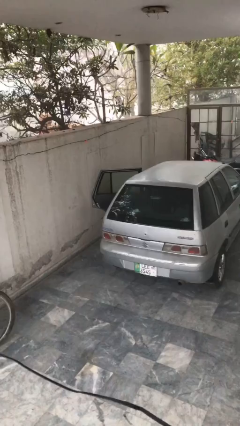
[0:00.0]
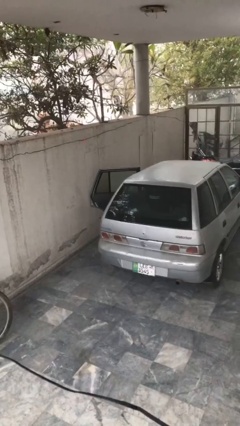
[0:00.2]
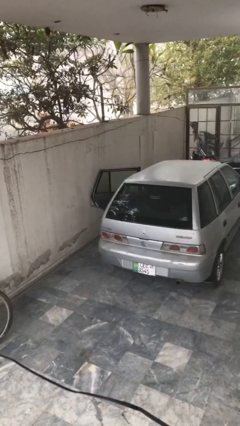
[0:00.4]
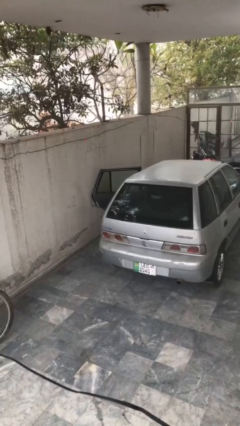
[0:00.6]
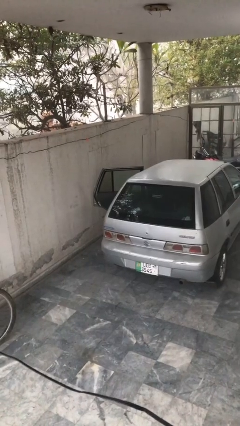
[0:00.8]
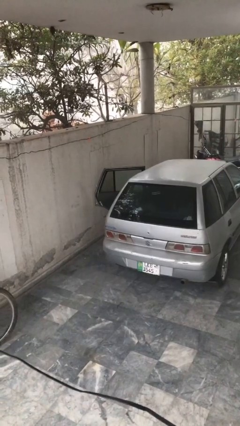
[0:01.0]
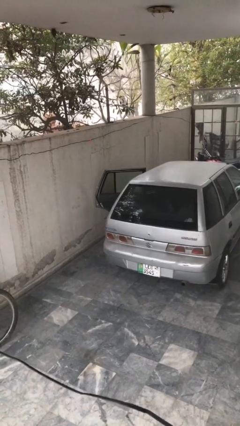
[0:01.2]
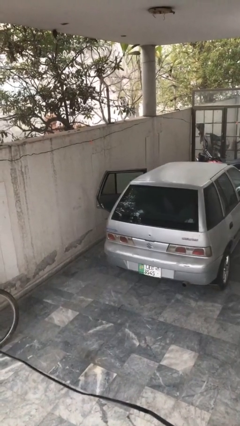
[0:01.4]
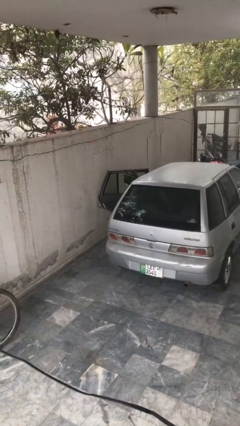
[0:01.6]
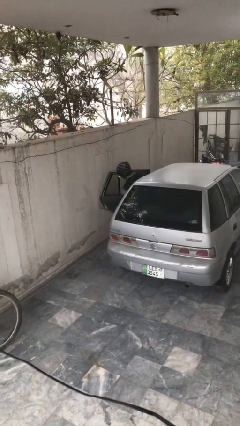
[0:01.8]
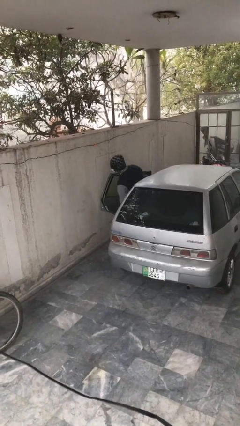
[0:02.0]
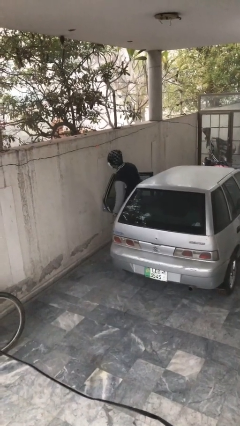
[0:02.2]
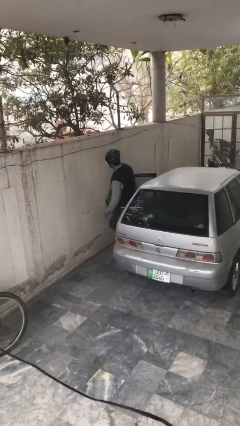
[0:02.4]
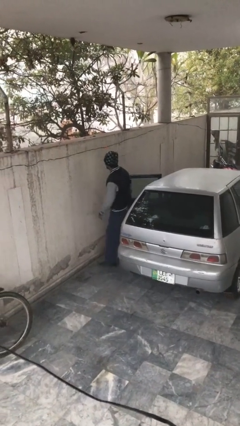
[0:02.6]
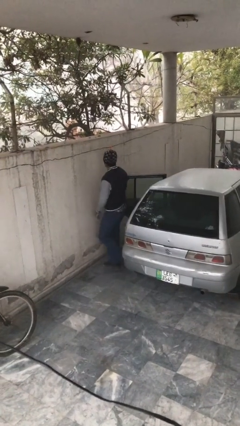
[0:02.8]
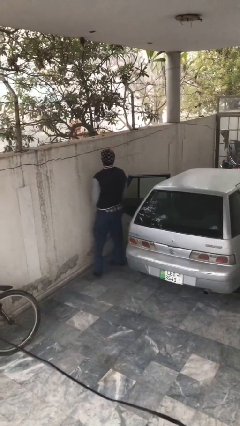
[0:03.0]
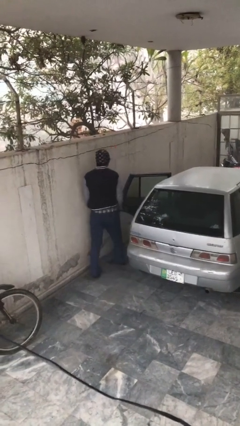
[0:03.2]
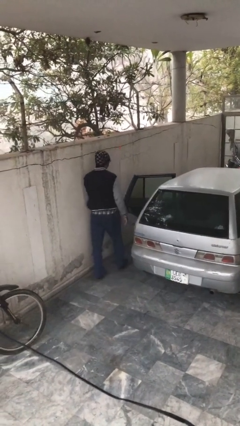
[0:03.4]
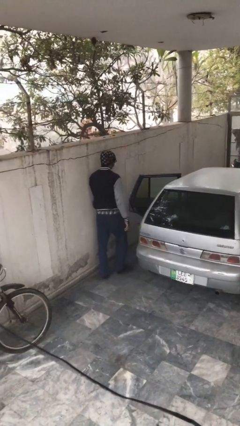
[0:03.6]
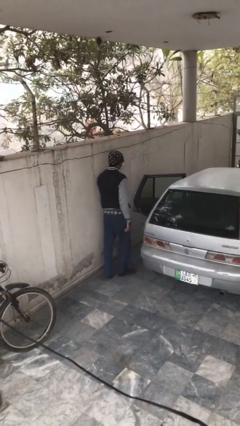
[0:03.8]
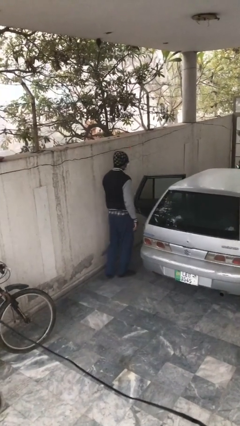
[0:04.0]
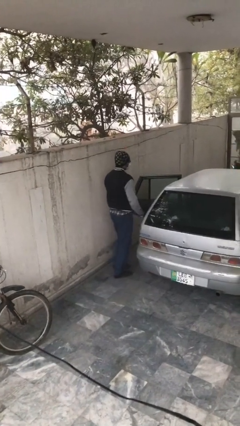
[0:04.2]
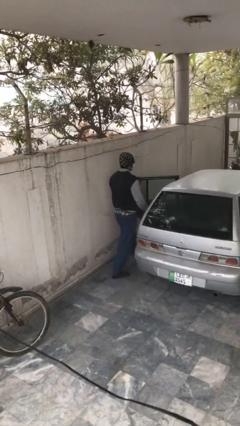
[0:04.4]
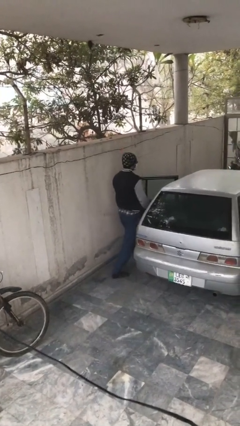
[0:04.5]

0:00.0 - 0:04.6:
person exits car

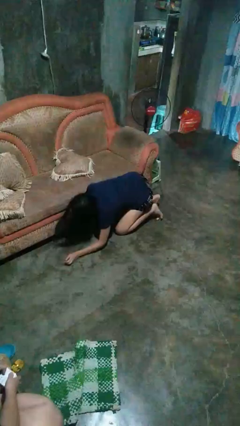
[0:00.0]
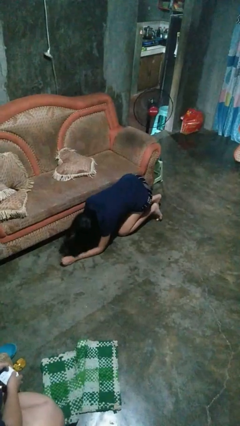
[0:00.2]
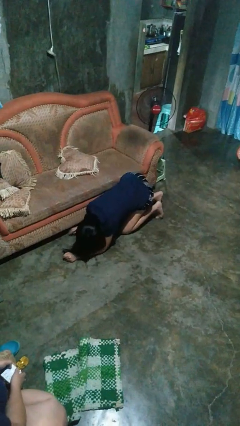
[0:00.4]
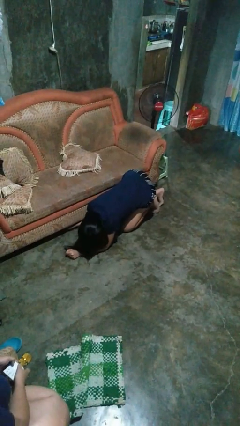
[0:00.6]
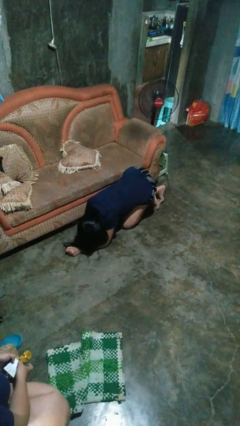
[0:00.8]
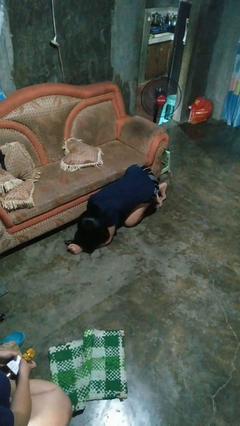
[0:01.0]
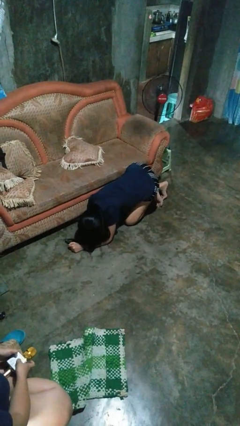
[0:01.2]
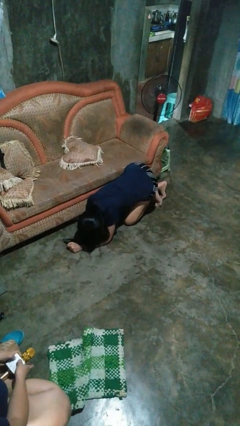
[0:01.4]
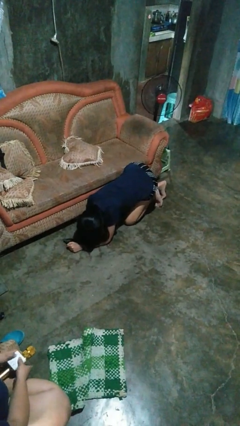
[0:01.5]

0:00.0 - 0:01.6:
person searches in couch

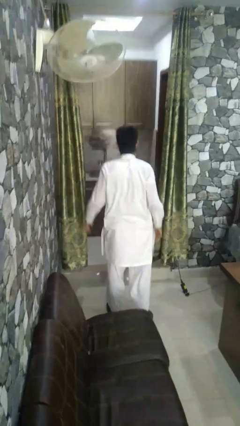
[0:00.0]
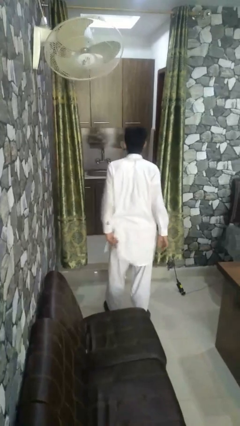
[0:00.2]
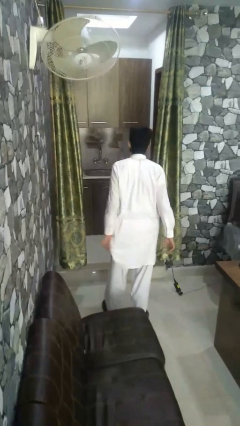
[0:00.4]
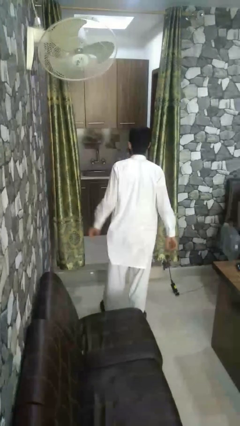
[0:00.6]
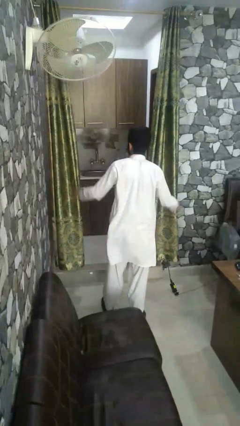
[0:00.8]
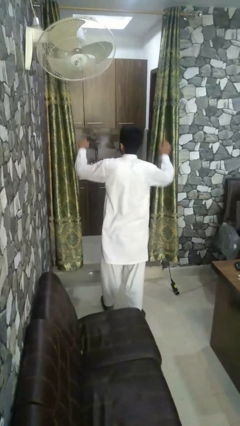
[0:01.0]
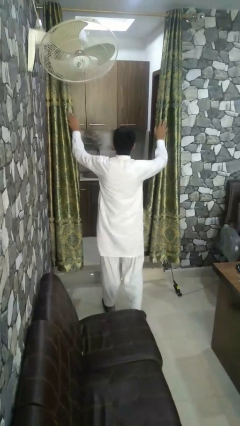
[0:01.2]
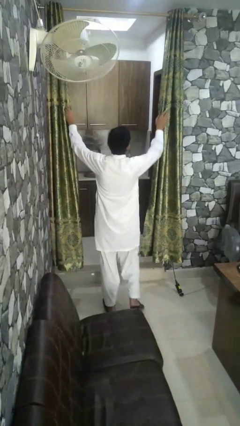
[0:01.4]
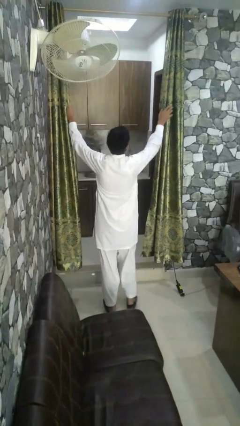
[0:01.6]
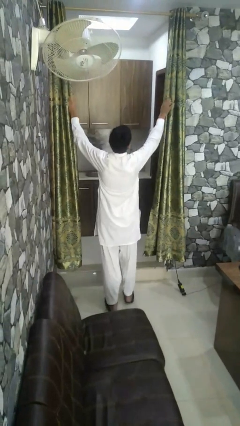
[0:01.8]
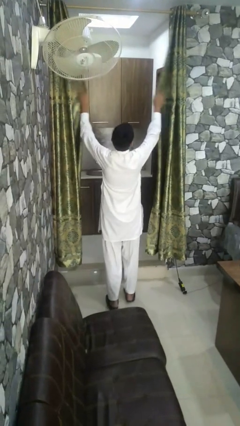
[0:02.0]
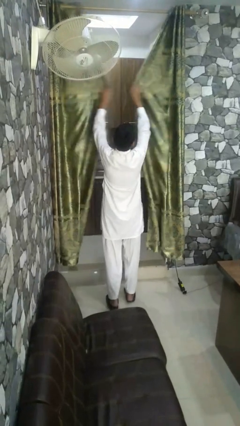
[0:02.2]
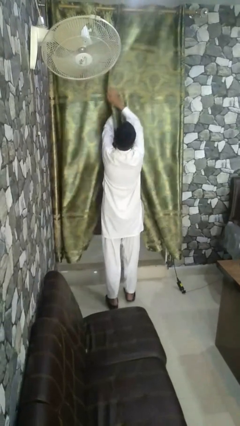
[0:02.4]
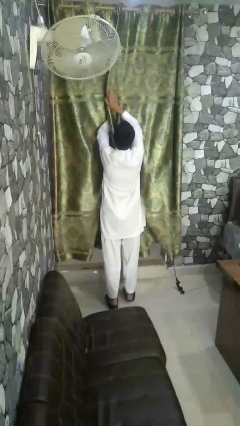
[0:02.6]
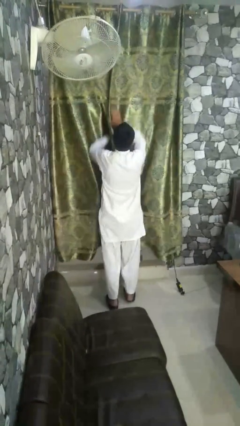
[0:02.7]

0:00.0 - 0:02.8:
person closes curtains

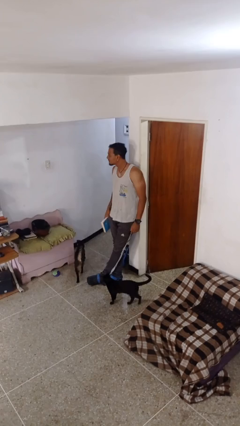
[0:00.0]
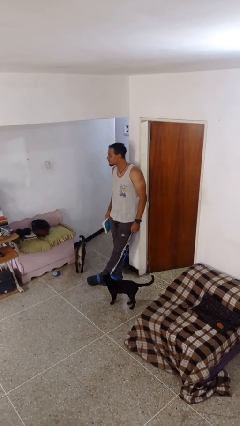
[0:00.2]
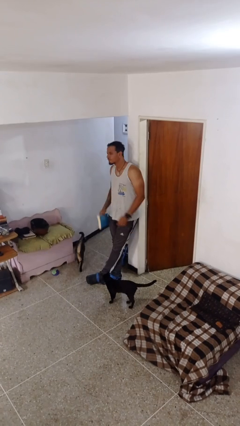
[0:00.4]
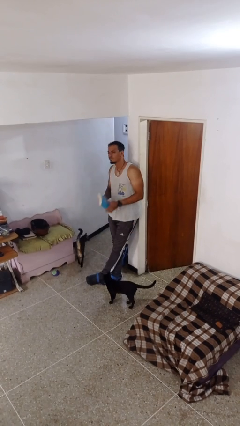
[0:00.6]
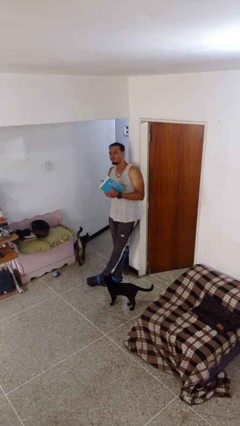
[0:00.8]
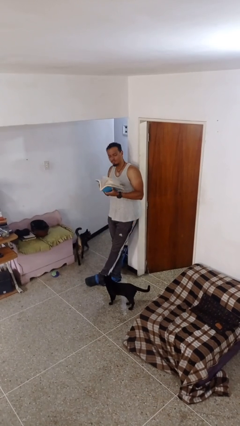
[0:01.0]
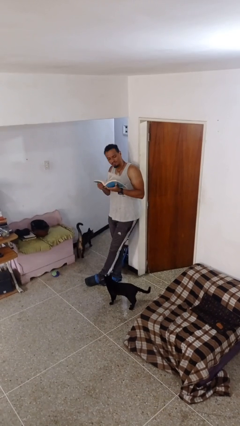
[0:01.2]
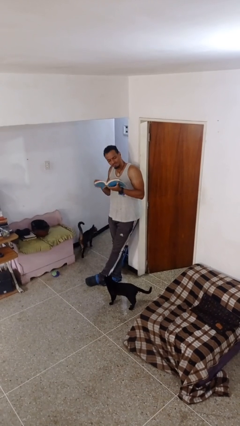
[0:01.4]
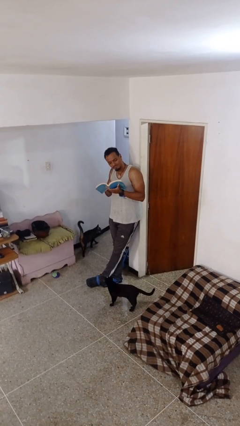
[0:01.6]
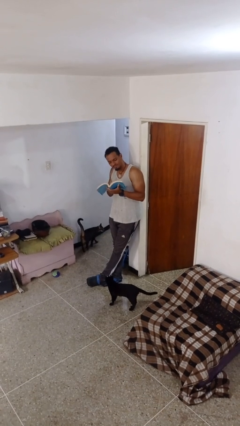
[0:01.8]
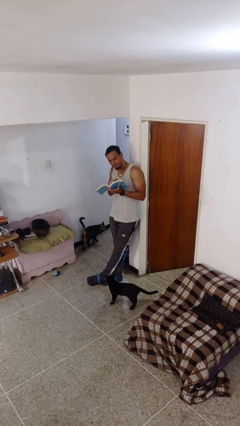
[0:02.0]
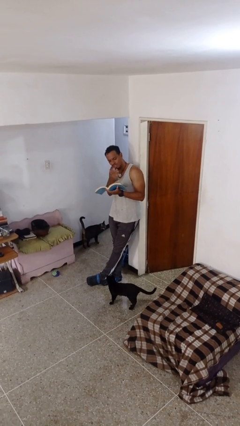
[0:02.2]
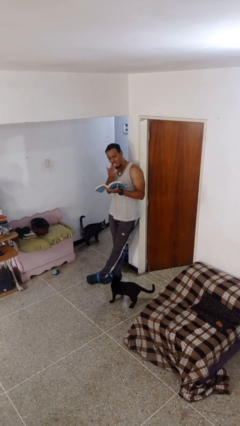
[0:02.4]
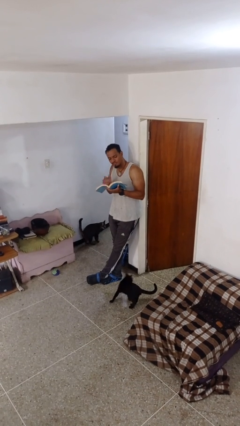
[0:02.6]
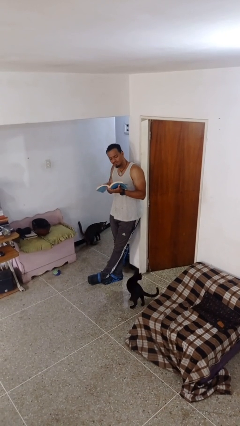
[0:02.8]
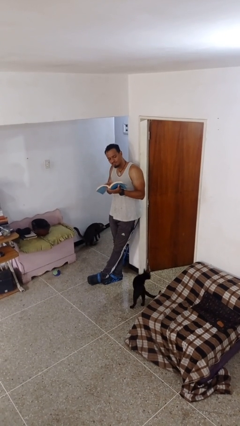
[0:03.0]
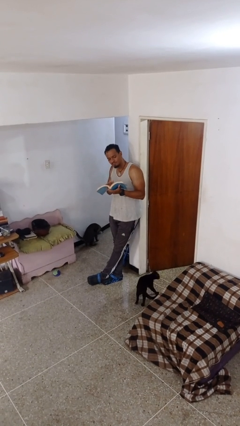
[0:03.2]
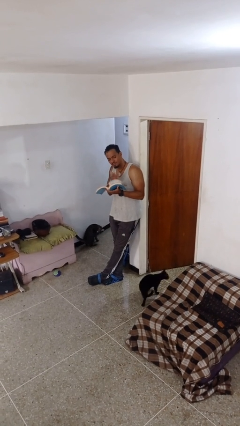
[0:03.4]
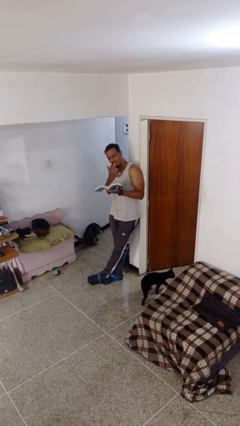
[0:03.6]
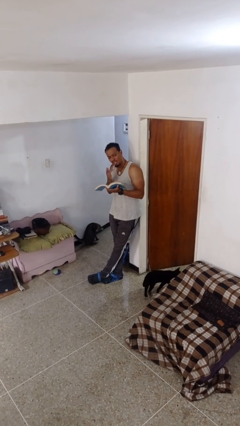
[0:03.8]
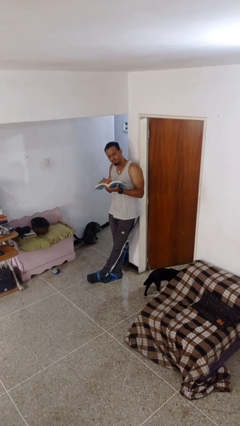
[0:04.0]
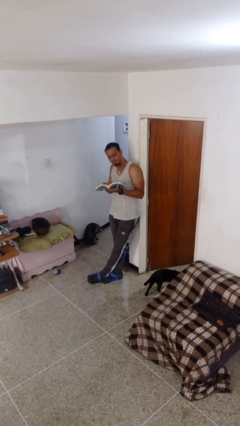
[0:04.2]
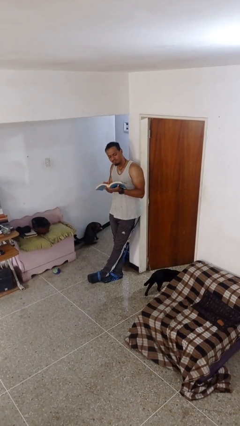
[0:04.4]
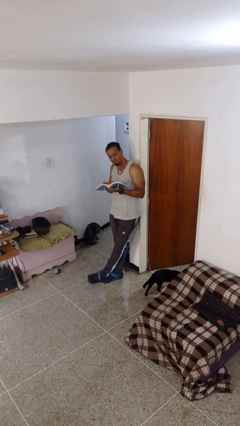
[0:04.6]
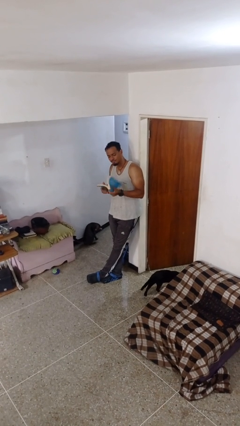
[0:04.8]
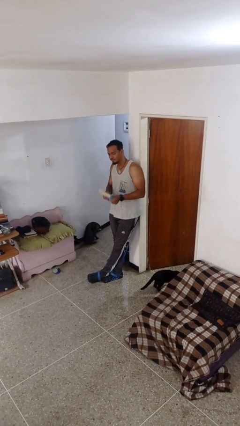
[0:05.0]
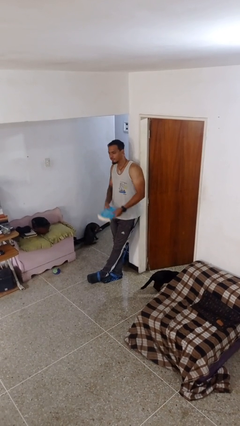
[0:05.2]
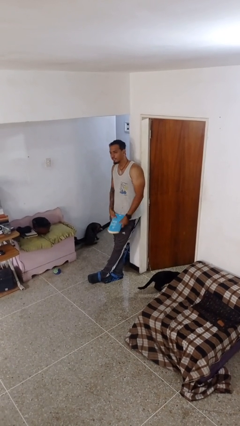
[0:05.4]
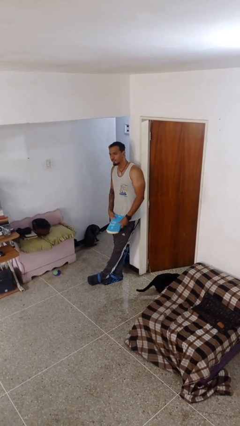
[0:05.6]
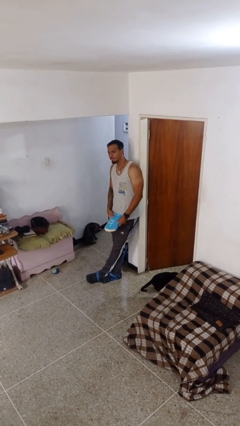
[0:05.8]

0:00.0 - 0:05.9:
person reads book

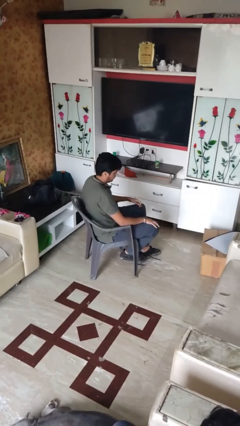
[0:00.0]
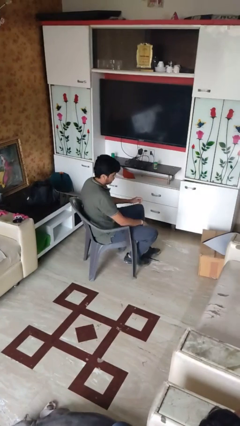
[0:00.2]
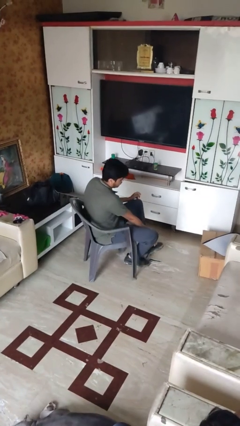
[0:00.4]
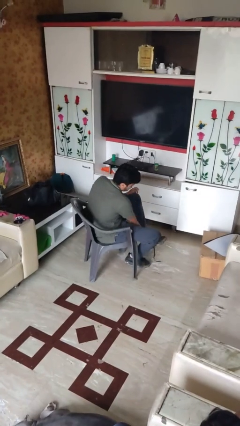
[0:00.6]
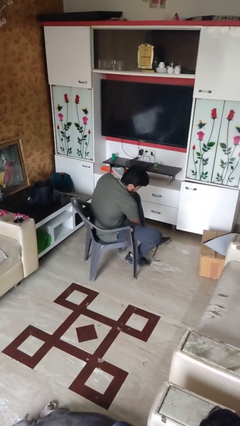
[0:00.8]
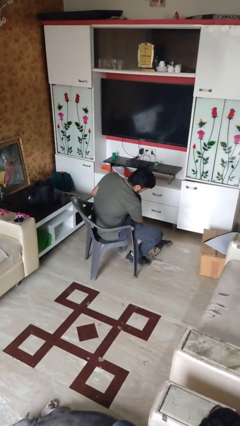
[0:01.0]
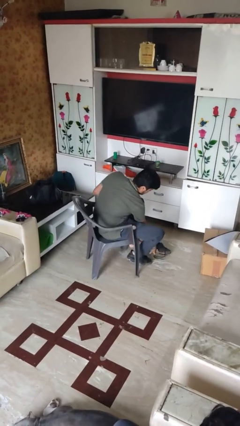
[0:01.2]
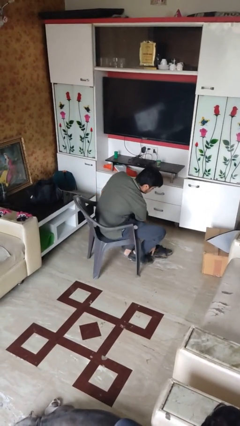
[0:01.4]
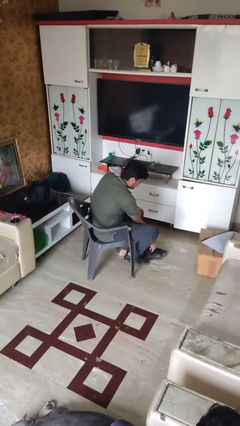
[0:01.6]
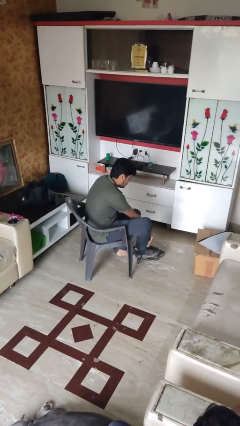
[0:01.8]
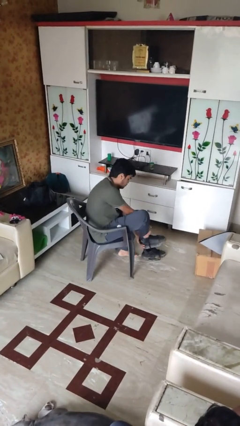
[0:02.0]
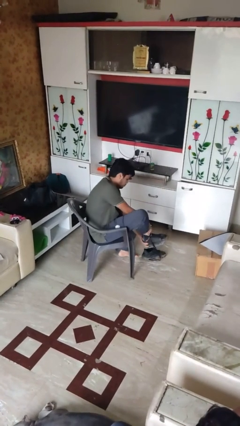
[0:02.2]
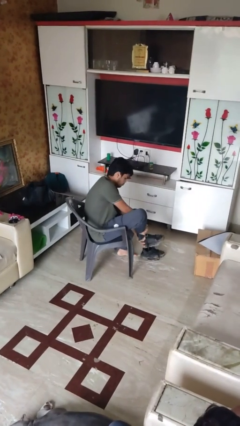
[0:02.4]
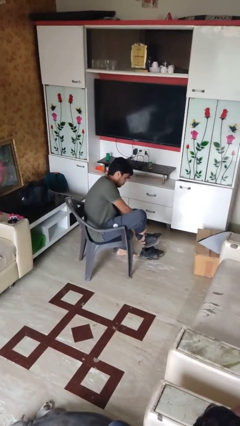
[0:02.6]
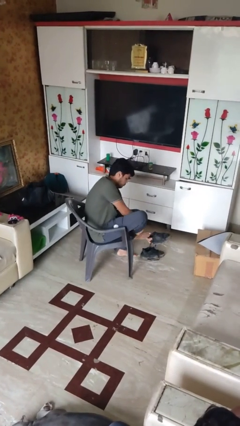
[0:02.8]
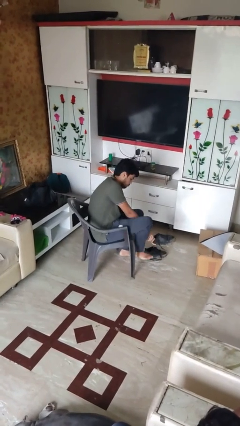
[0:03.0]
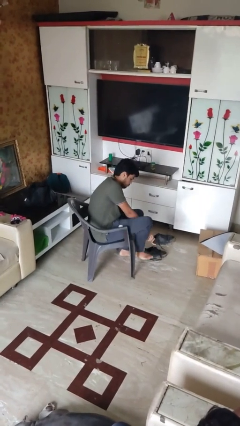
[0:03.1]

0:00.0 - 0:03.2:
person takes off shoes
